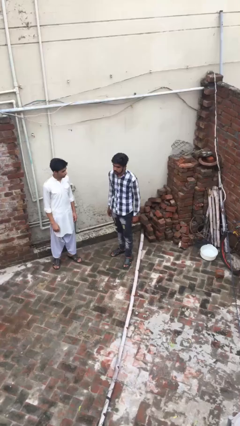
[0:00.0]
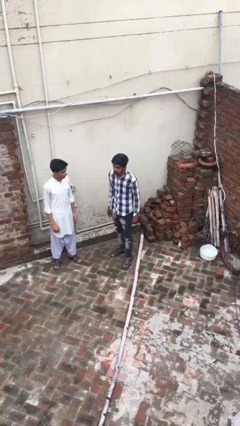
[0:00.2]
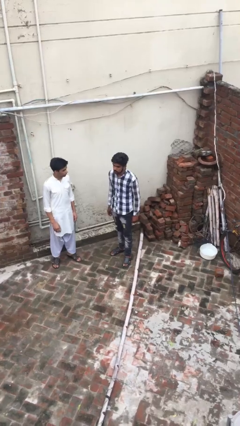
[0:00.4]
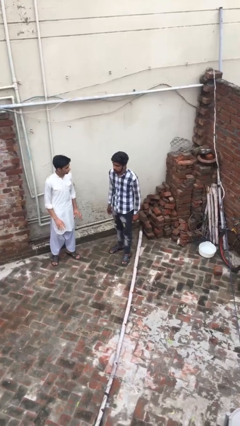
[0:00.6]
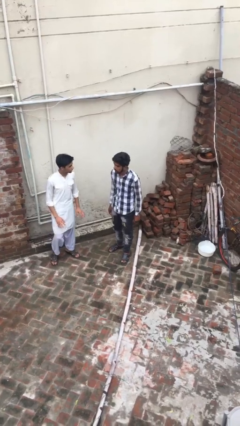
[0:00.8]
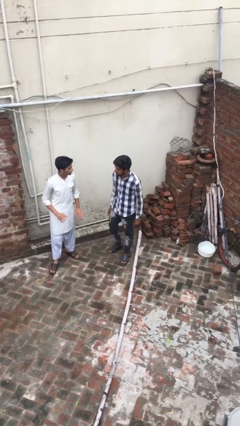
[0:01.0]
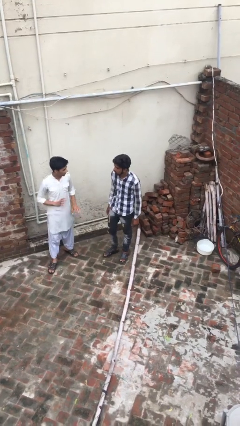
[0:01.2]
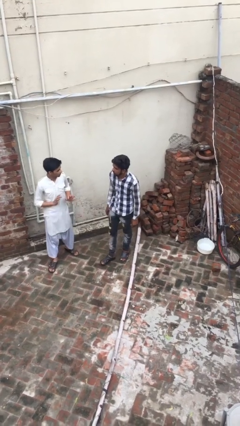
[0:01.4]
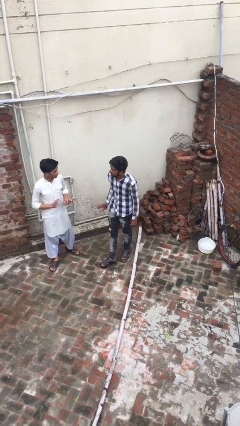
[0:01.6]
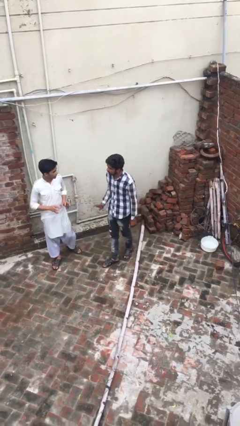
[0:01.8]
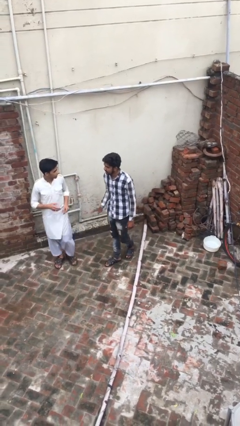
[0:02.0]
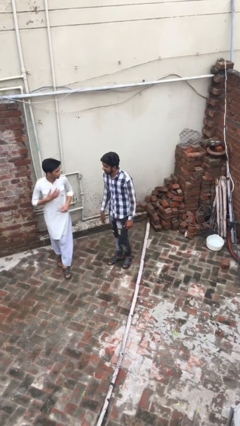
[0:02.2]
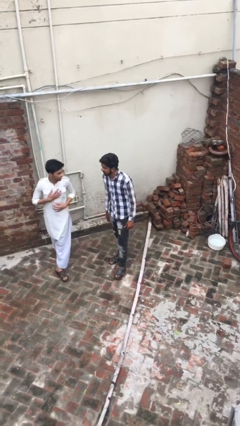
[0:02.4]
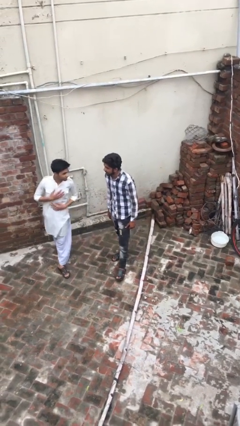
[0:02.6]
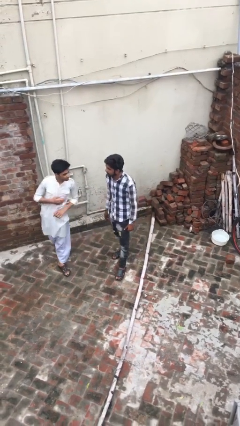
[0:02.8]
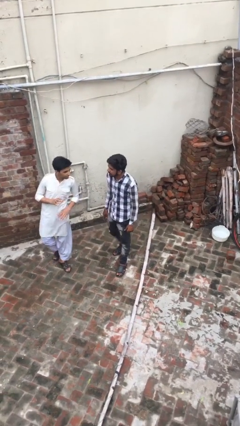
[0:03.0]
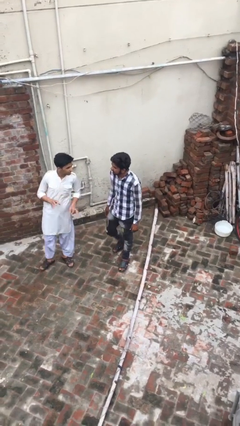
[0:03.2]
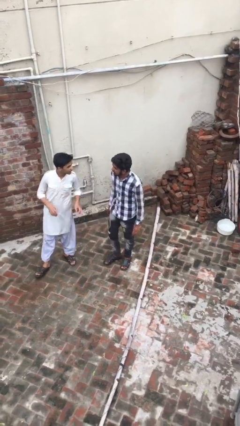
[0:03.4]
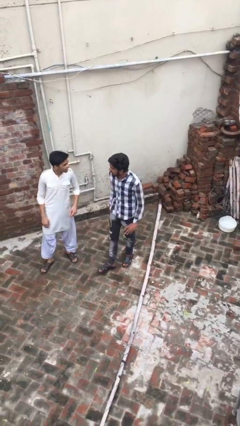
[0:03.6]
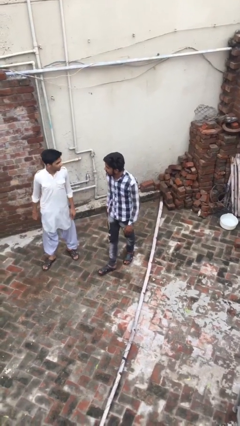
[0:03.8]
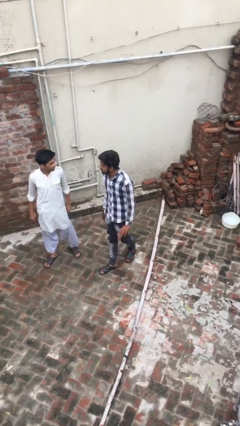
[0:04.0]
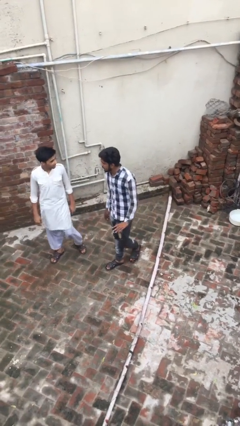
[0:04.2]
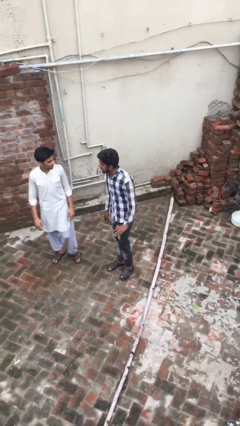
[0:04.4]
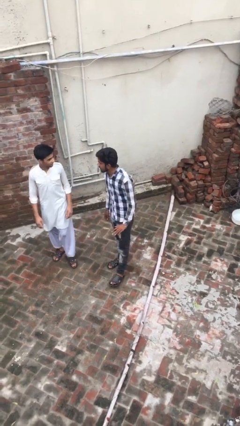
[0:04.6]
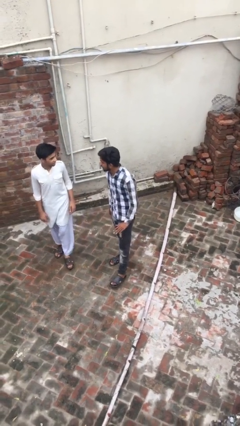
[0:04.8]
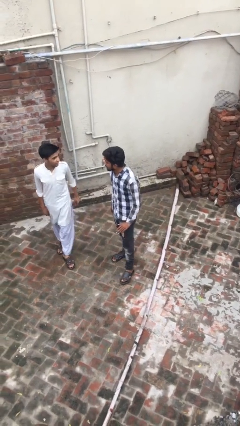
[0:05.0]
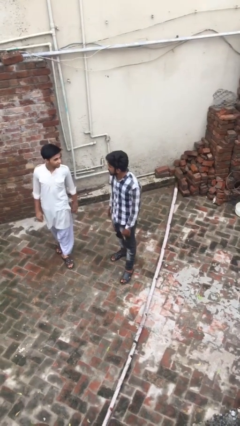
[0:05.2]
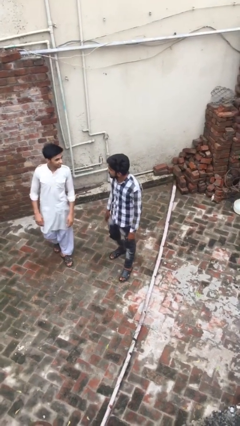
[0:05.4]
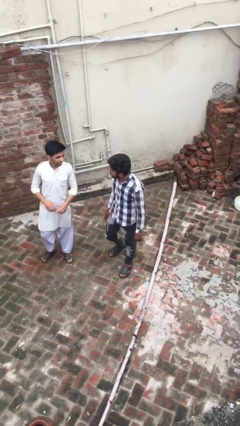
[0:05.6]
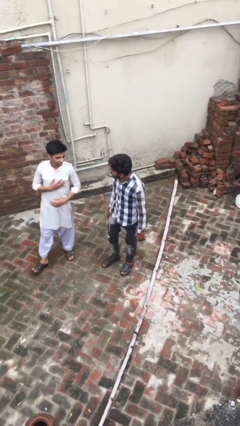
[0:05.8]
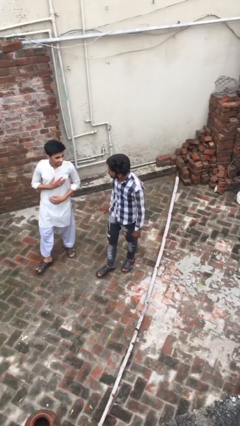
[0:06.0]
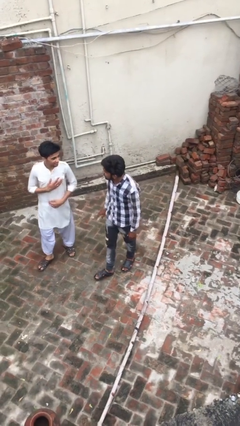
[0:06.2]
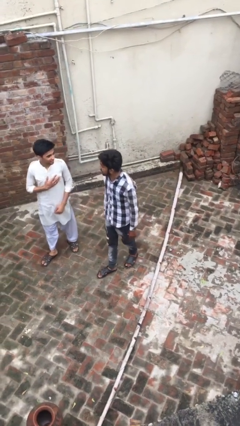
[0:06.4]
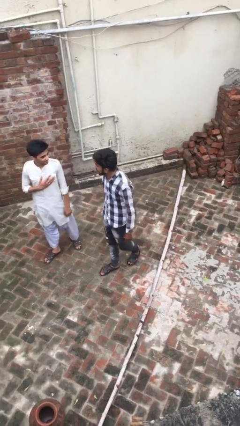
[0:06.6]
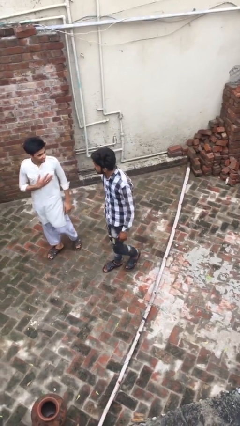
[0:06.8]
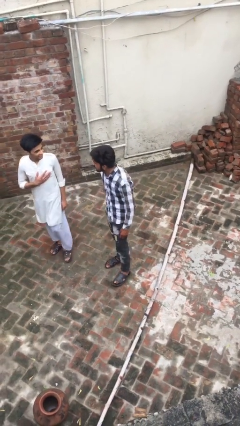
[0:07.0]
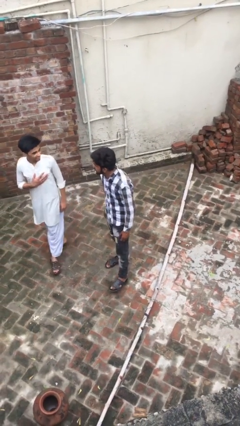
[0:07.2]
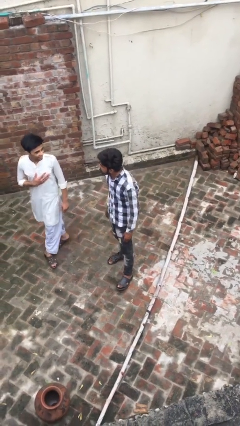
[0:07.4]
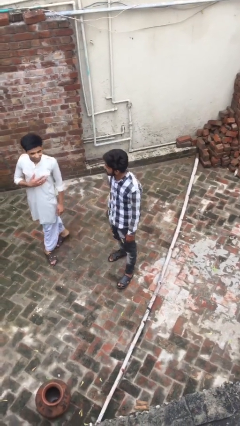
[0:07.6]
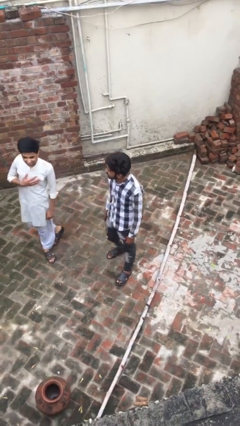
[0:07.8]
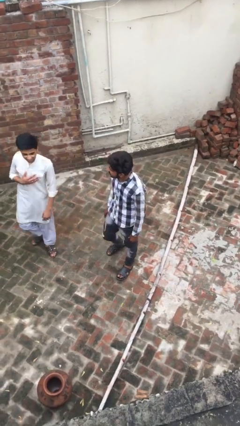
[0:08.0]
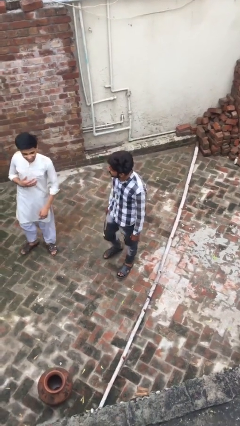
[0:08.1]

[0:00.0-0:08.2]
person talks to person

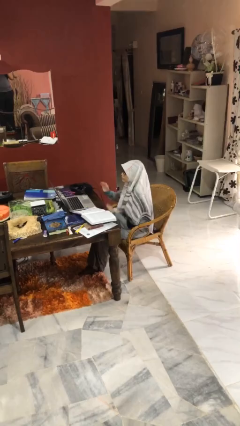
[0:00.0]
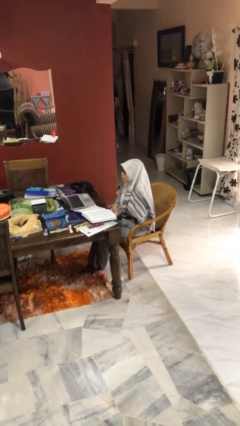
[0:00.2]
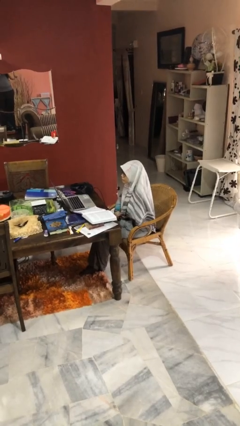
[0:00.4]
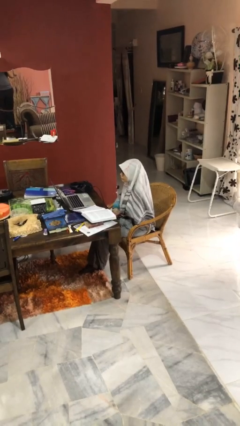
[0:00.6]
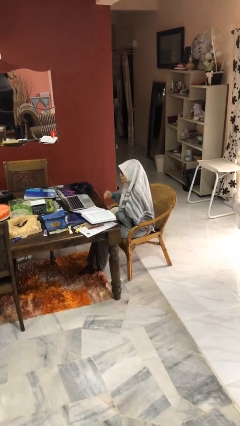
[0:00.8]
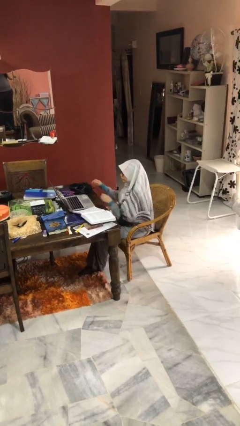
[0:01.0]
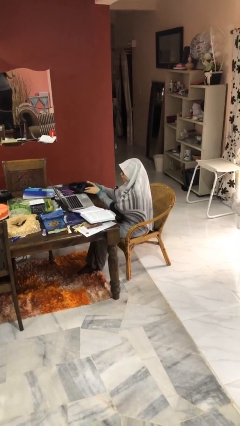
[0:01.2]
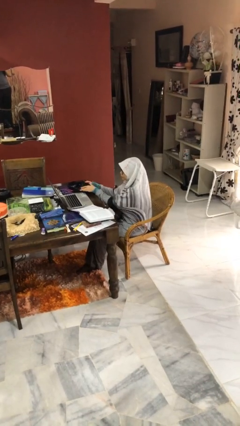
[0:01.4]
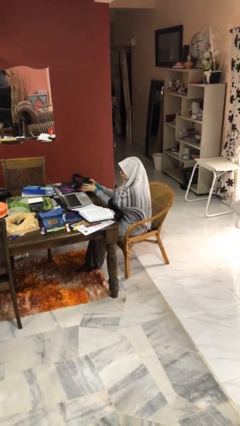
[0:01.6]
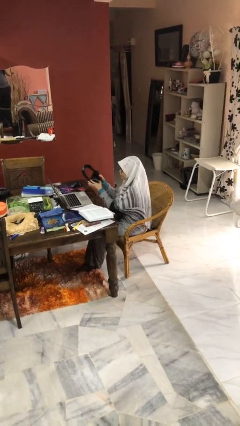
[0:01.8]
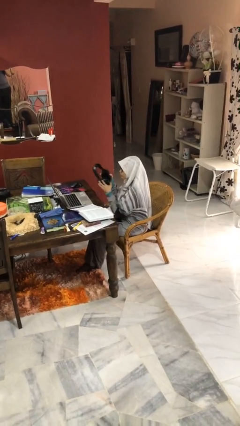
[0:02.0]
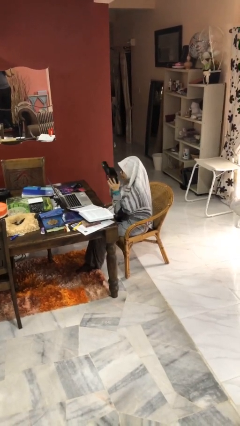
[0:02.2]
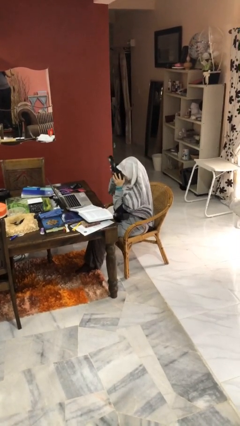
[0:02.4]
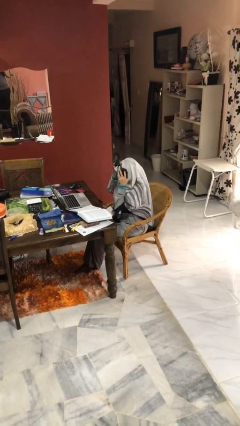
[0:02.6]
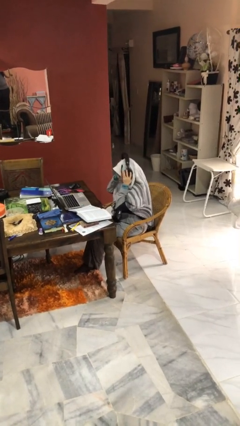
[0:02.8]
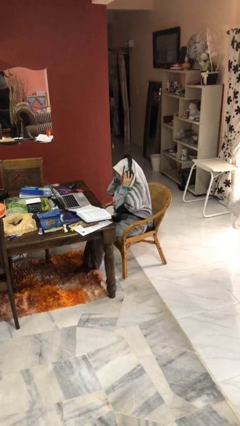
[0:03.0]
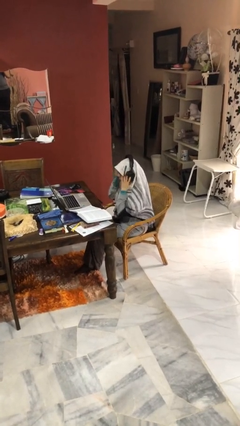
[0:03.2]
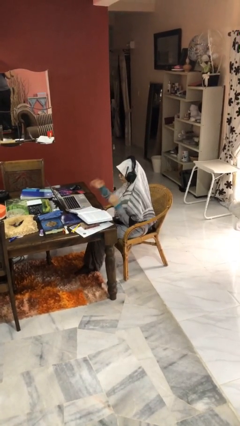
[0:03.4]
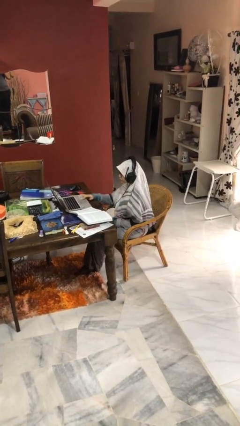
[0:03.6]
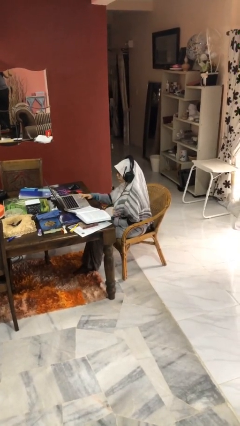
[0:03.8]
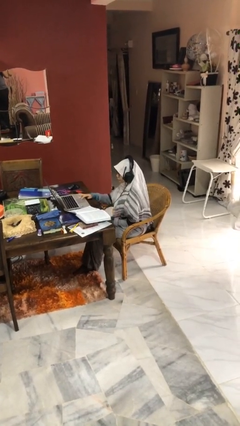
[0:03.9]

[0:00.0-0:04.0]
person puts on headphones

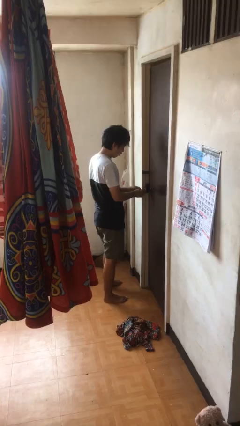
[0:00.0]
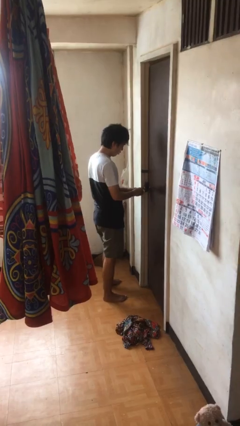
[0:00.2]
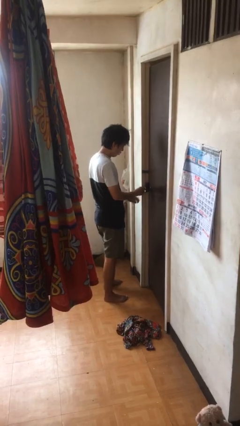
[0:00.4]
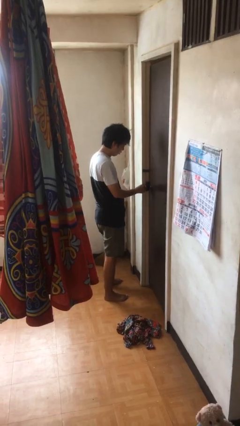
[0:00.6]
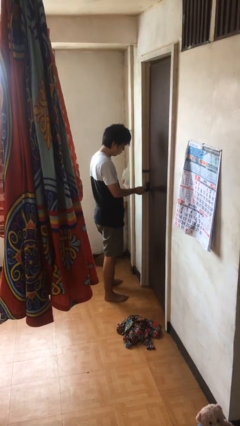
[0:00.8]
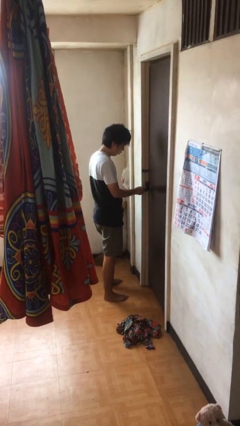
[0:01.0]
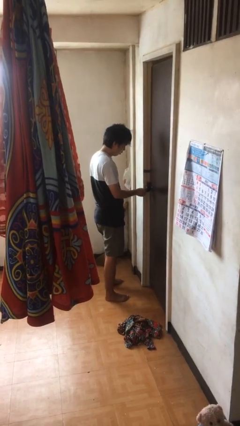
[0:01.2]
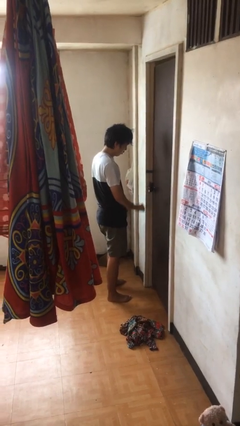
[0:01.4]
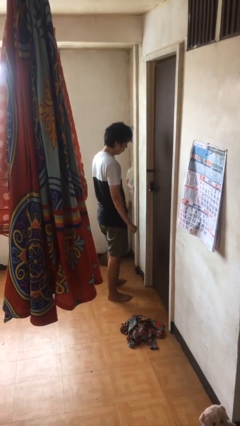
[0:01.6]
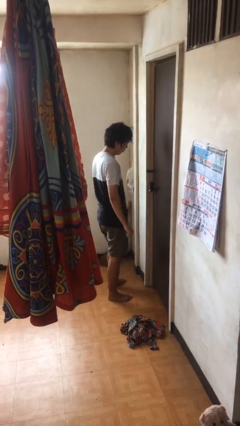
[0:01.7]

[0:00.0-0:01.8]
person locks door with keys

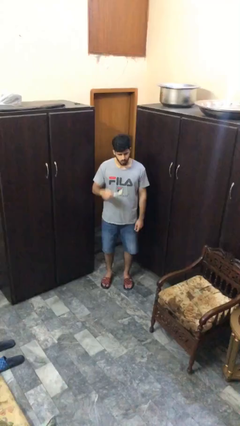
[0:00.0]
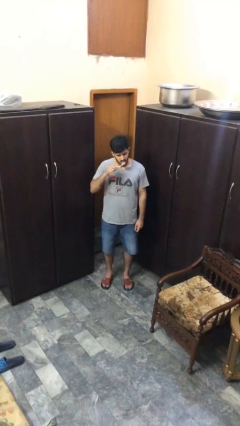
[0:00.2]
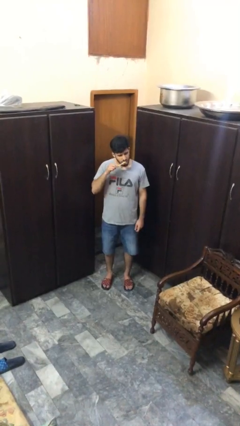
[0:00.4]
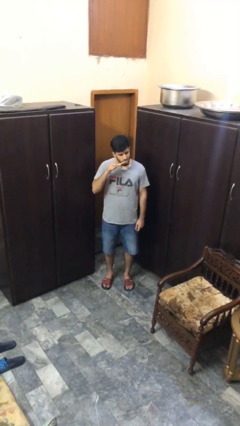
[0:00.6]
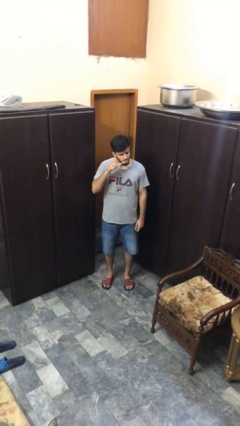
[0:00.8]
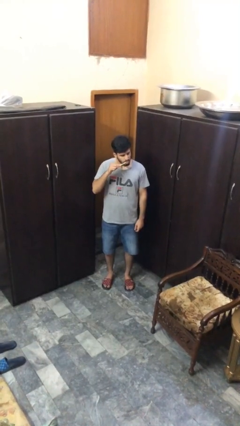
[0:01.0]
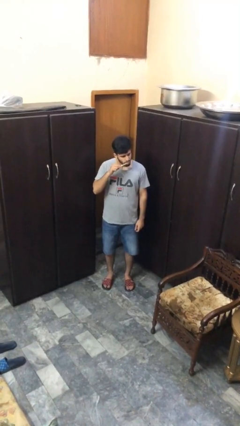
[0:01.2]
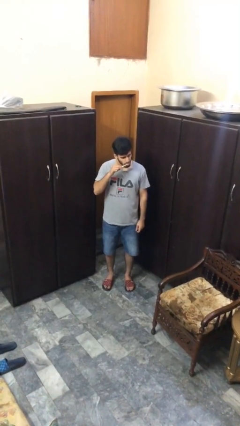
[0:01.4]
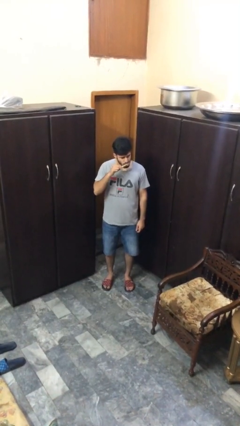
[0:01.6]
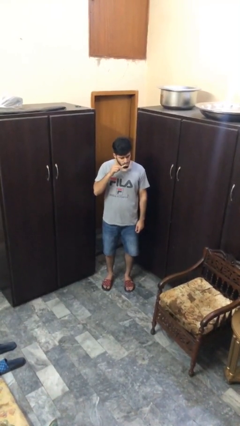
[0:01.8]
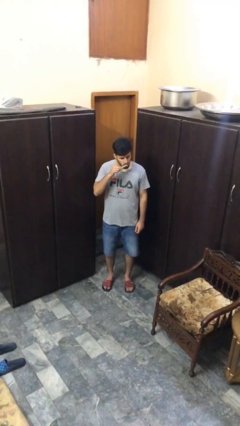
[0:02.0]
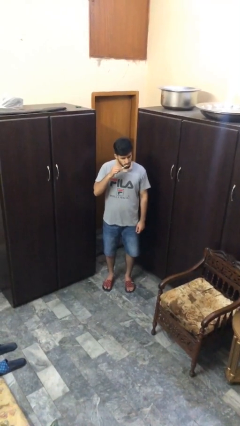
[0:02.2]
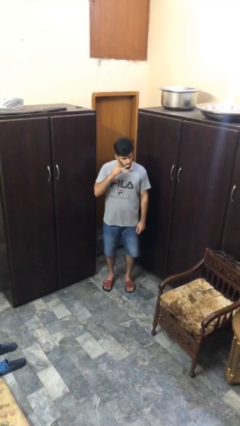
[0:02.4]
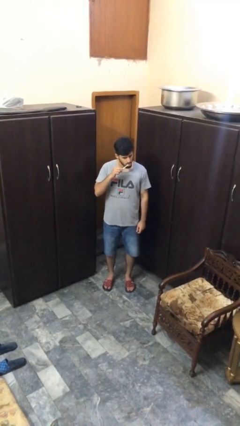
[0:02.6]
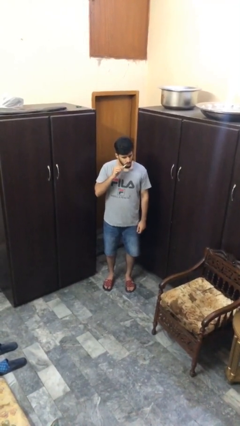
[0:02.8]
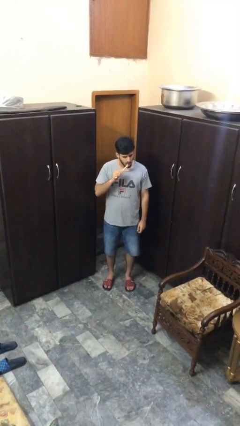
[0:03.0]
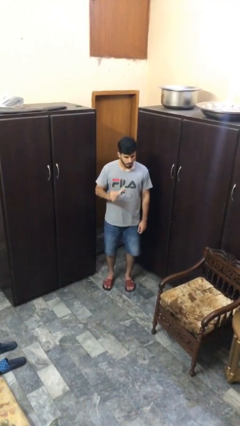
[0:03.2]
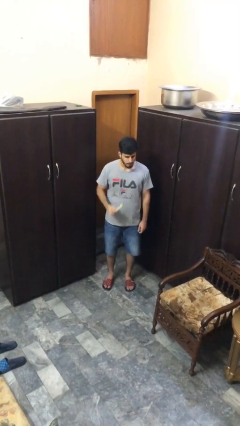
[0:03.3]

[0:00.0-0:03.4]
person brushes teeth

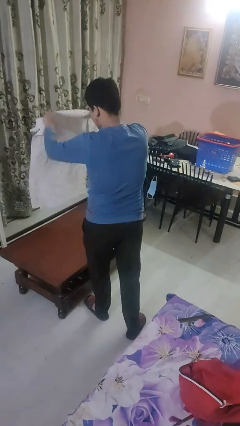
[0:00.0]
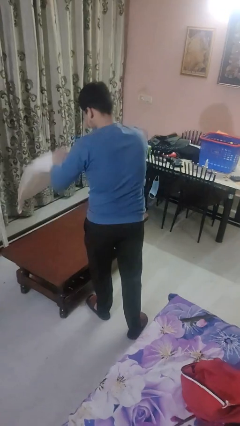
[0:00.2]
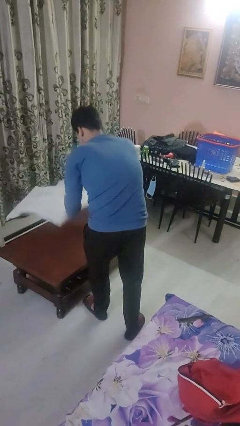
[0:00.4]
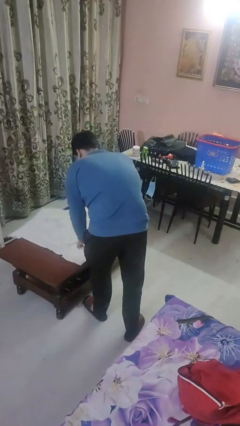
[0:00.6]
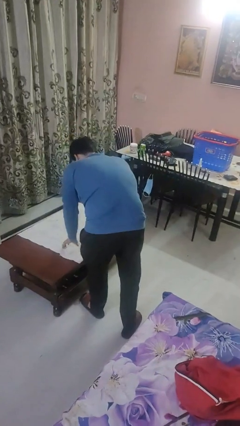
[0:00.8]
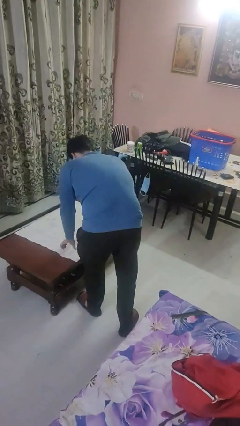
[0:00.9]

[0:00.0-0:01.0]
person spreads tablecloth
